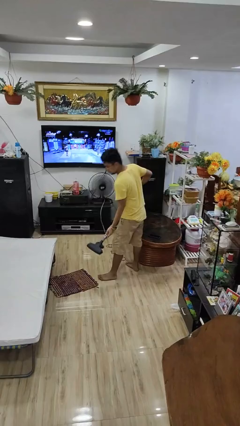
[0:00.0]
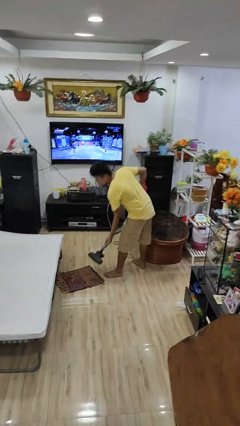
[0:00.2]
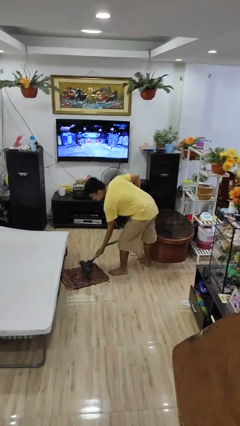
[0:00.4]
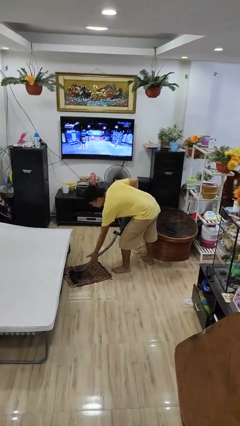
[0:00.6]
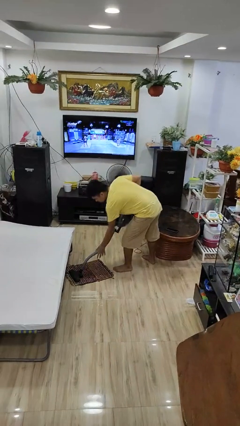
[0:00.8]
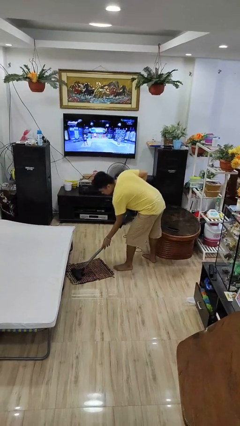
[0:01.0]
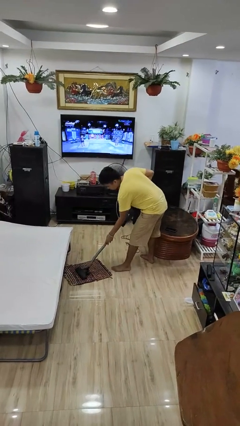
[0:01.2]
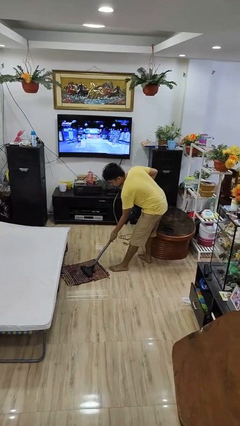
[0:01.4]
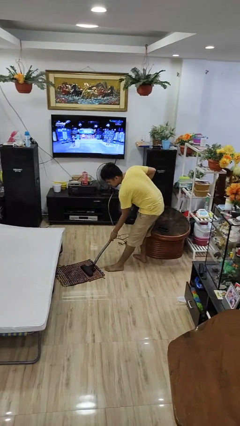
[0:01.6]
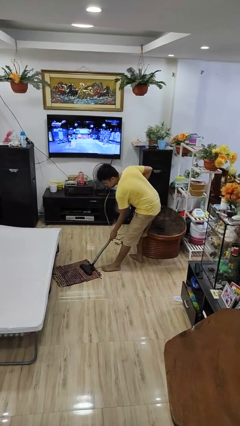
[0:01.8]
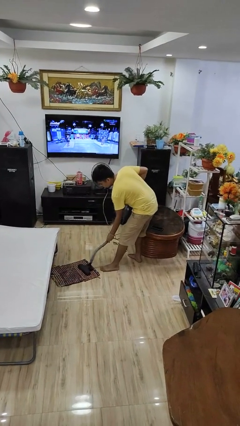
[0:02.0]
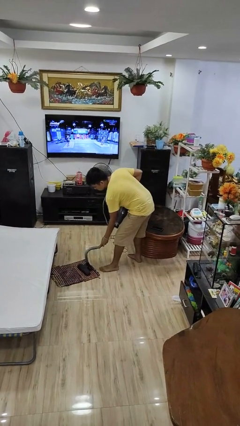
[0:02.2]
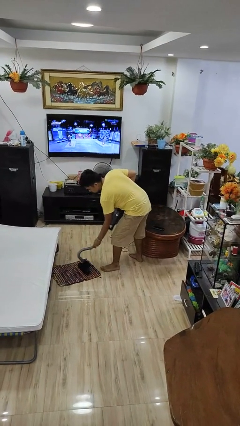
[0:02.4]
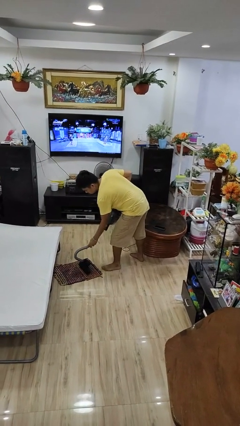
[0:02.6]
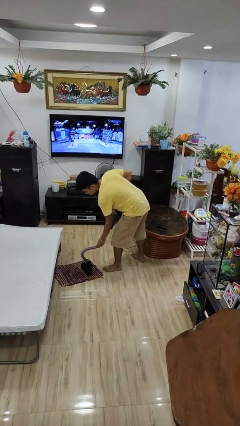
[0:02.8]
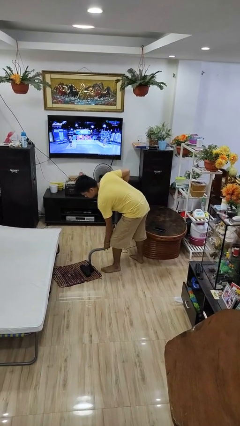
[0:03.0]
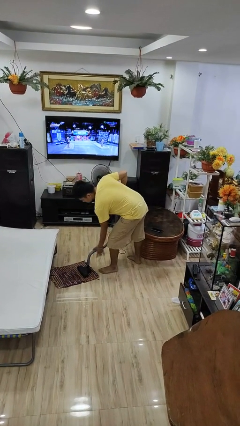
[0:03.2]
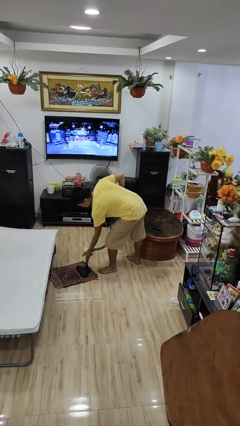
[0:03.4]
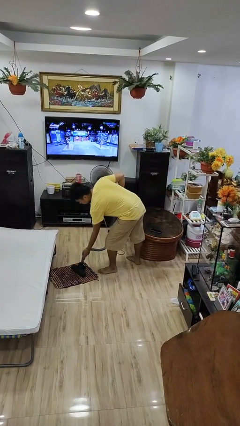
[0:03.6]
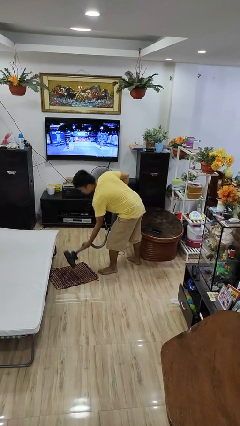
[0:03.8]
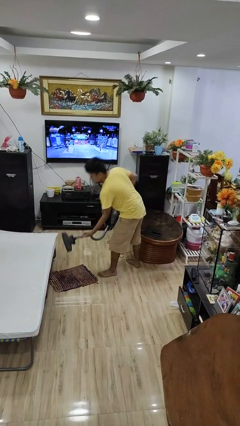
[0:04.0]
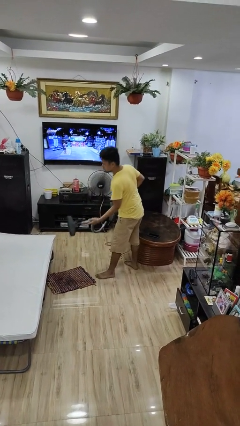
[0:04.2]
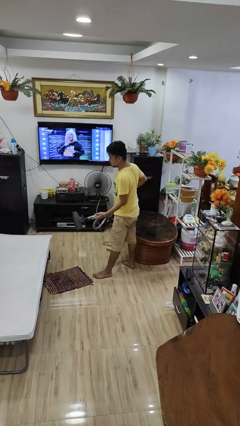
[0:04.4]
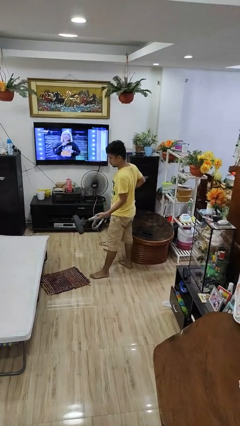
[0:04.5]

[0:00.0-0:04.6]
person vacuums carpet

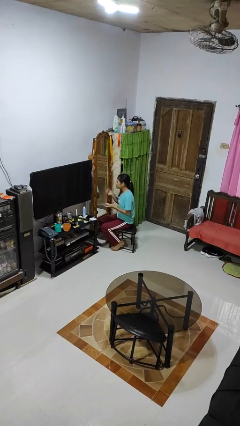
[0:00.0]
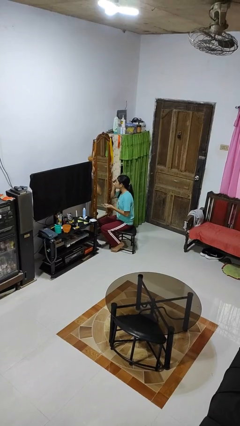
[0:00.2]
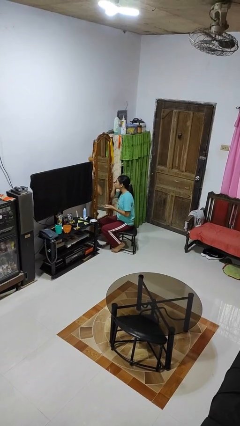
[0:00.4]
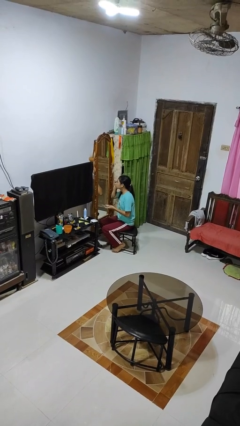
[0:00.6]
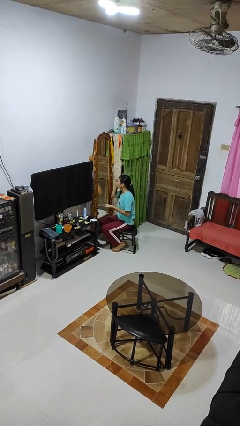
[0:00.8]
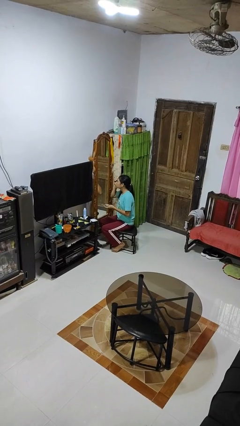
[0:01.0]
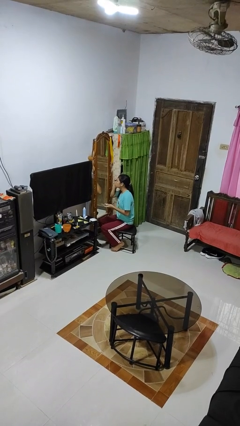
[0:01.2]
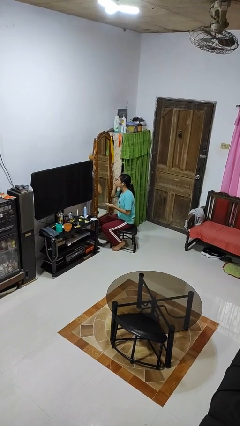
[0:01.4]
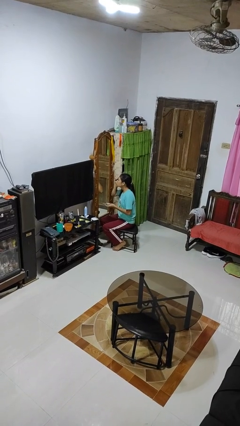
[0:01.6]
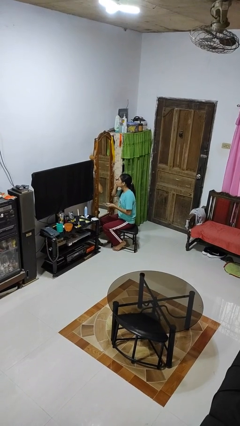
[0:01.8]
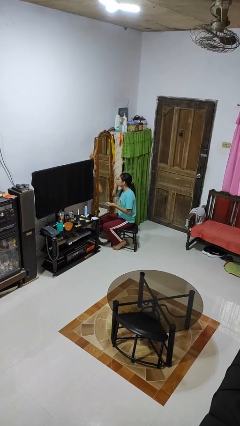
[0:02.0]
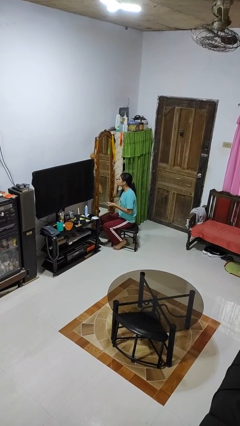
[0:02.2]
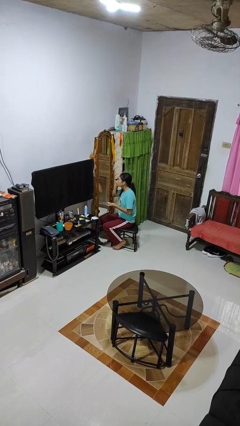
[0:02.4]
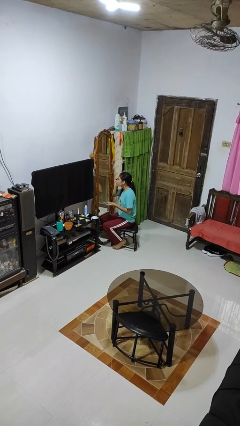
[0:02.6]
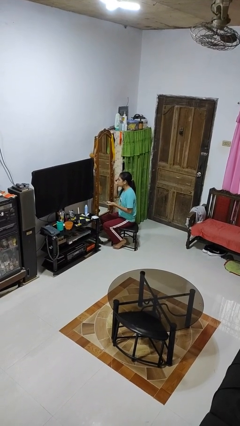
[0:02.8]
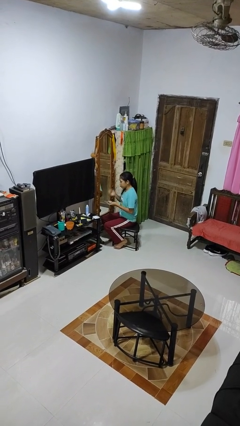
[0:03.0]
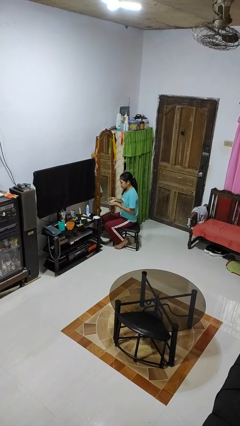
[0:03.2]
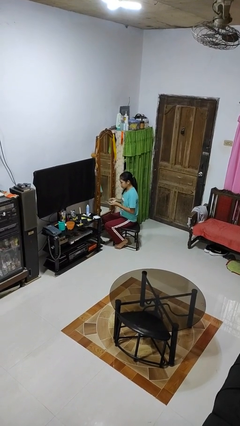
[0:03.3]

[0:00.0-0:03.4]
person applies eye makeup

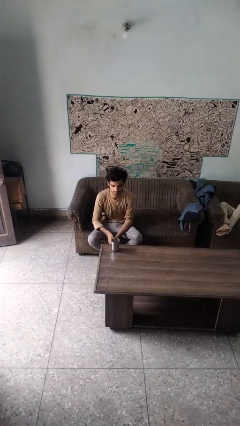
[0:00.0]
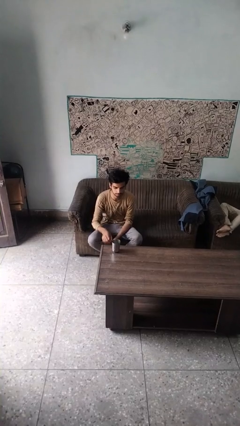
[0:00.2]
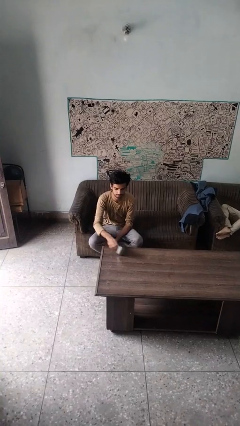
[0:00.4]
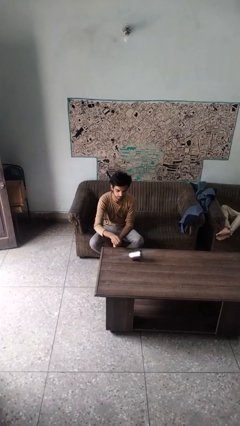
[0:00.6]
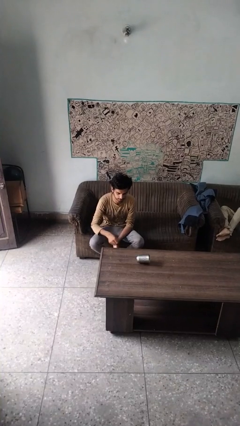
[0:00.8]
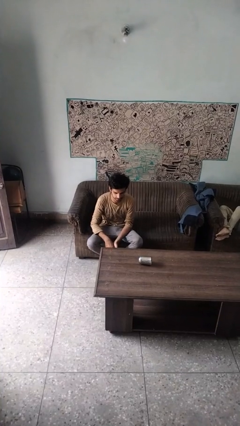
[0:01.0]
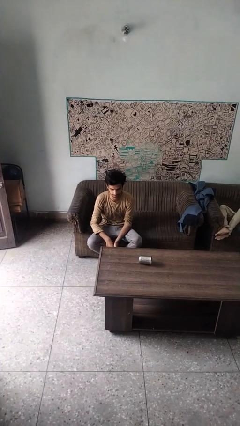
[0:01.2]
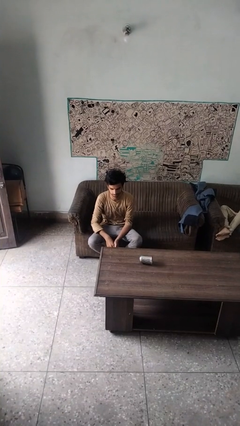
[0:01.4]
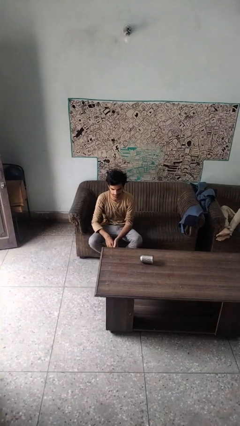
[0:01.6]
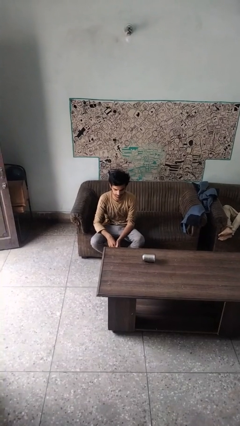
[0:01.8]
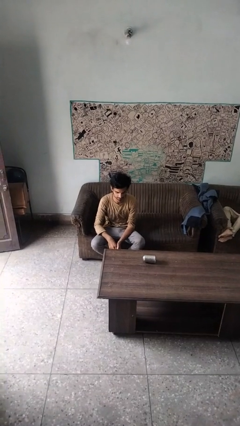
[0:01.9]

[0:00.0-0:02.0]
person knocks over glass

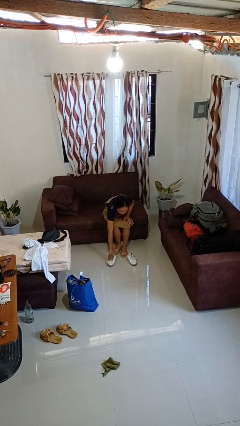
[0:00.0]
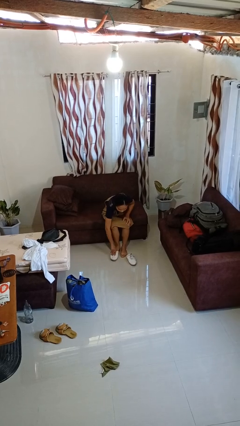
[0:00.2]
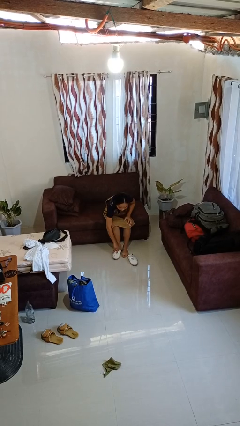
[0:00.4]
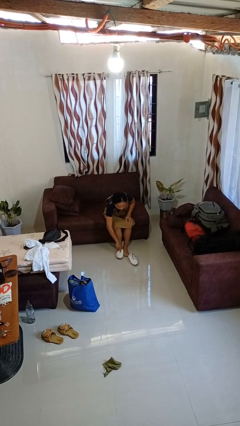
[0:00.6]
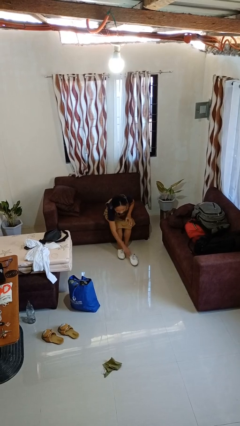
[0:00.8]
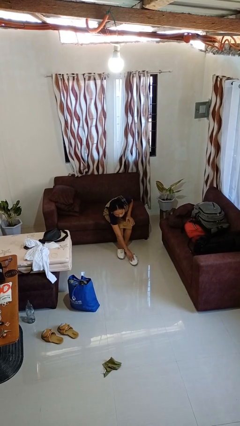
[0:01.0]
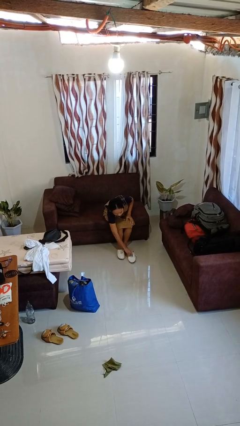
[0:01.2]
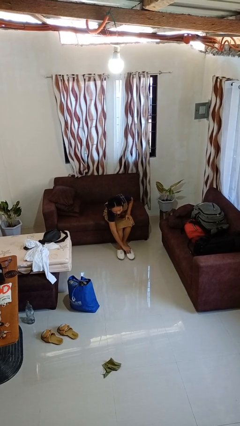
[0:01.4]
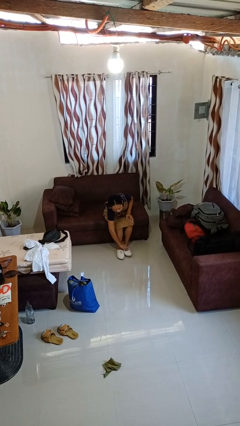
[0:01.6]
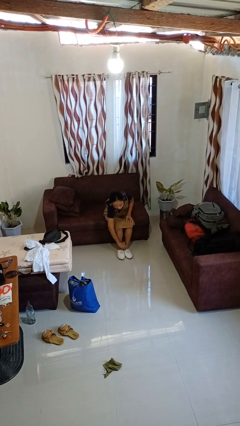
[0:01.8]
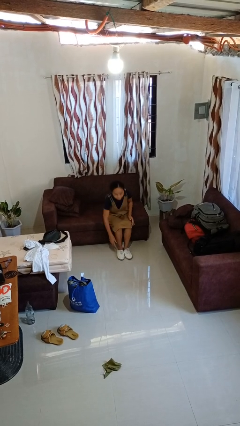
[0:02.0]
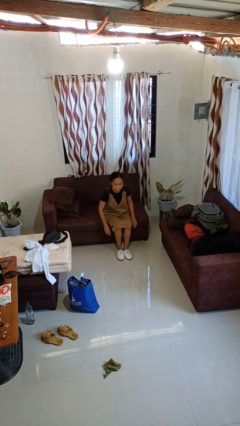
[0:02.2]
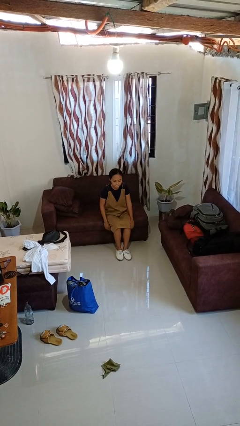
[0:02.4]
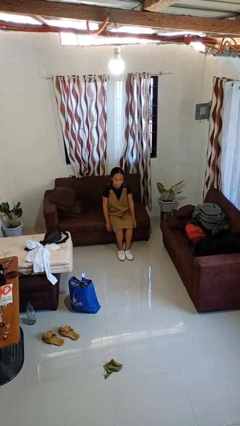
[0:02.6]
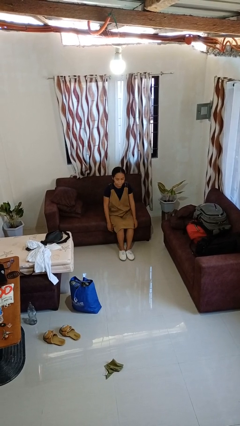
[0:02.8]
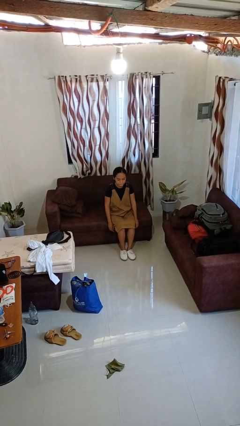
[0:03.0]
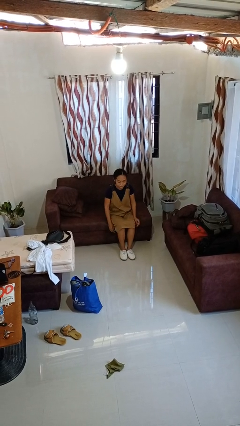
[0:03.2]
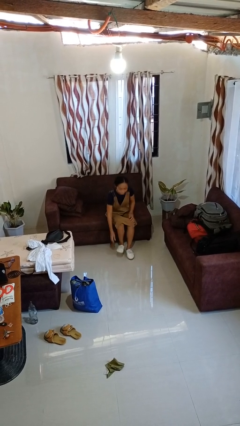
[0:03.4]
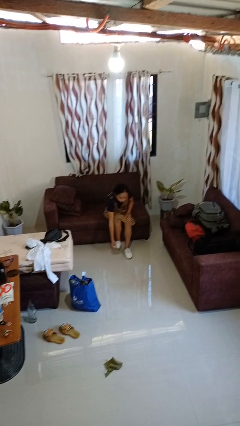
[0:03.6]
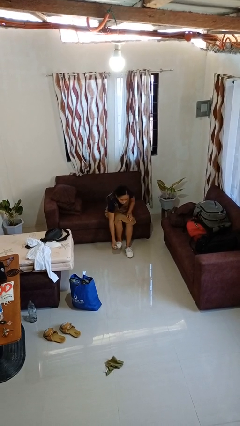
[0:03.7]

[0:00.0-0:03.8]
person puts on shoes

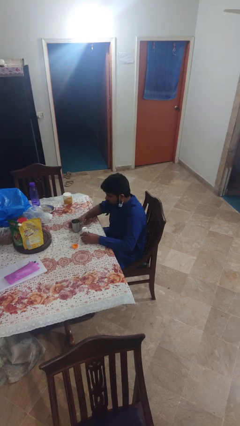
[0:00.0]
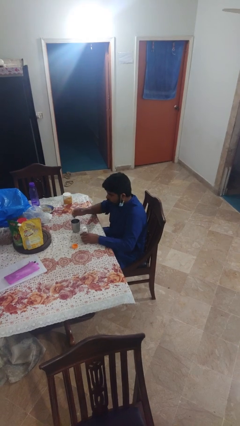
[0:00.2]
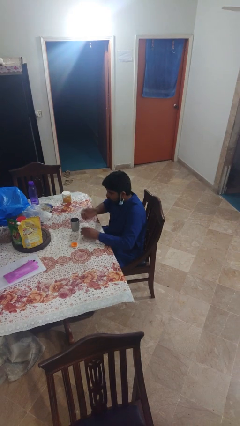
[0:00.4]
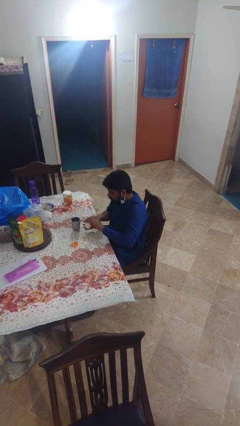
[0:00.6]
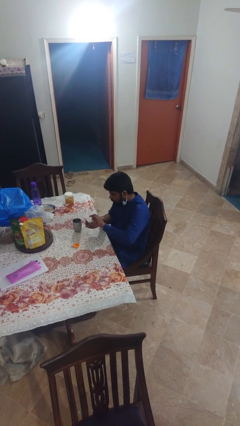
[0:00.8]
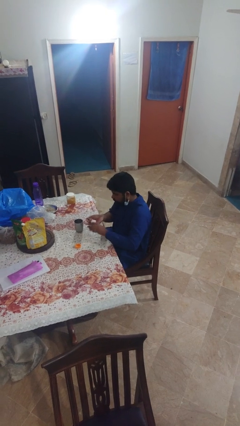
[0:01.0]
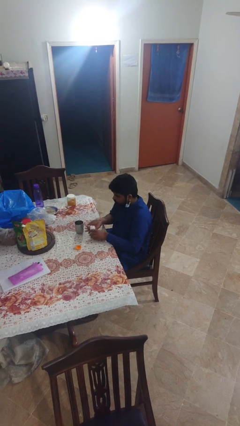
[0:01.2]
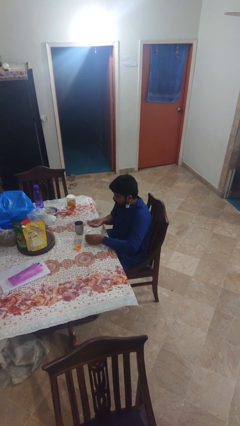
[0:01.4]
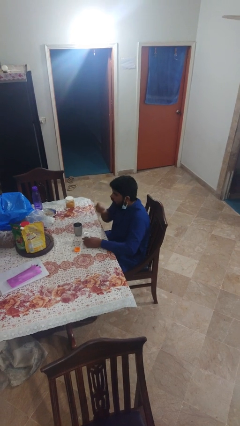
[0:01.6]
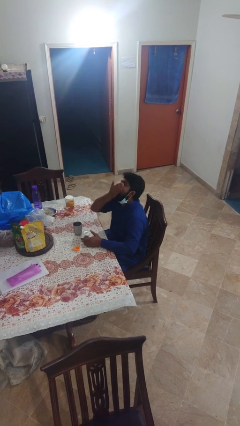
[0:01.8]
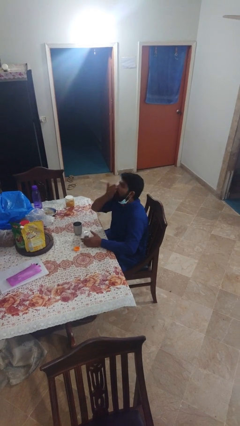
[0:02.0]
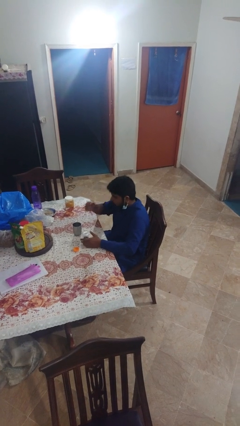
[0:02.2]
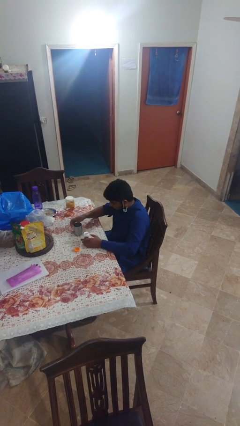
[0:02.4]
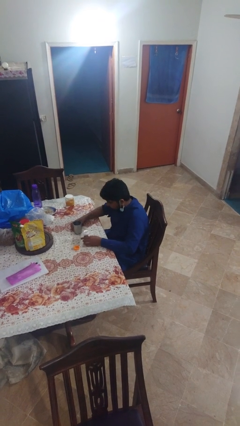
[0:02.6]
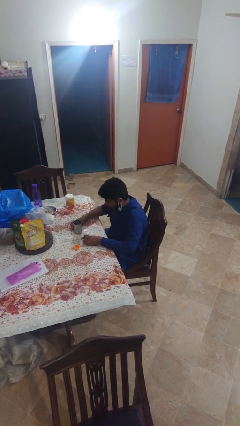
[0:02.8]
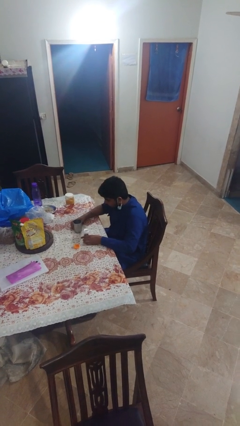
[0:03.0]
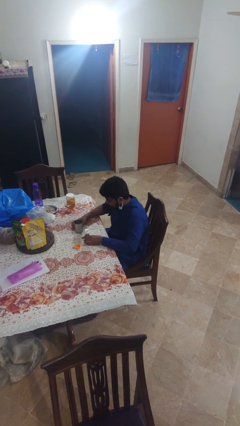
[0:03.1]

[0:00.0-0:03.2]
person takes medicine pills

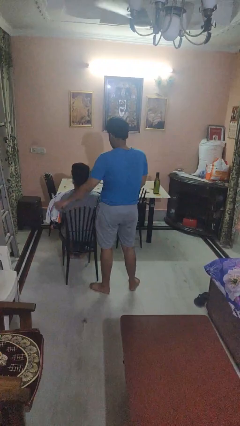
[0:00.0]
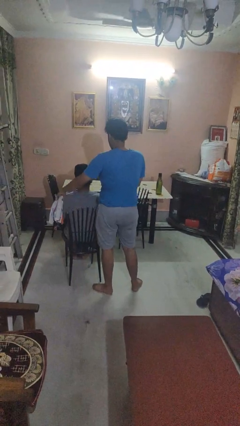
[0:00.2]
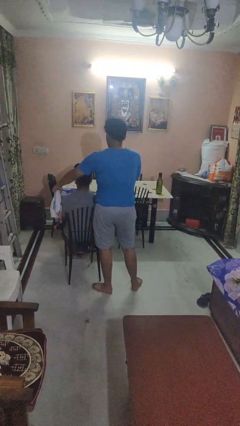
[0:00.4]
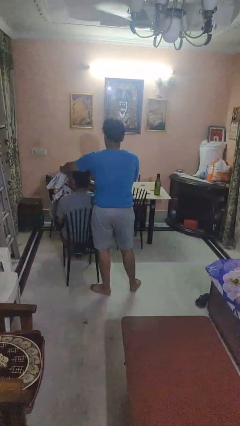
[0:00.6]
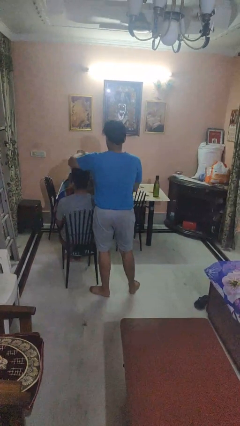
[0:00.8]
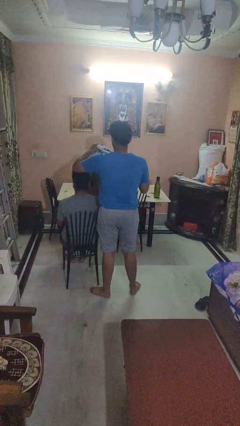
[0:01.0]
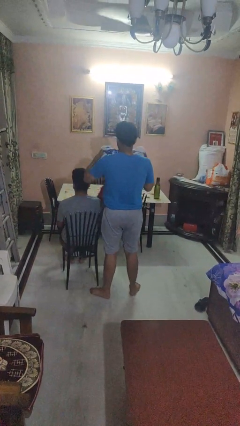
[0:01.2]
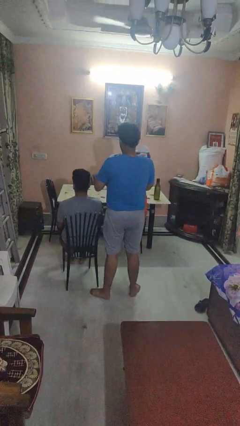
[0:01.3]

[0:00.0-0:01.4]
person uncovers friend with blanket
